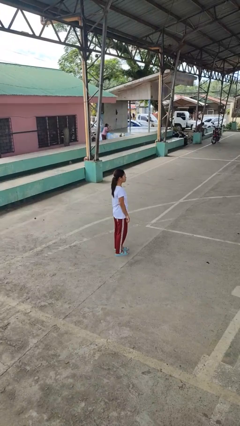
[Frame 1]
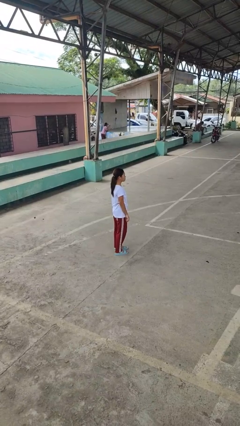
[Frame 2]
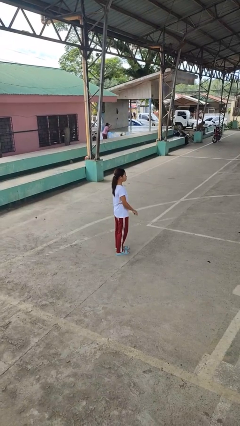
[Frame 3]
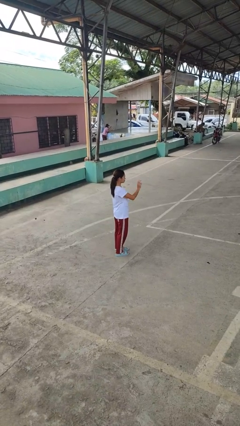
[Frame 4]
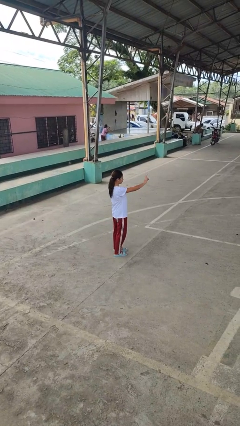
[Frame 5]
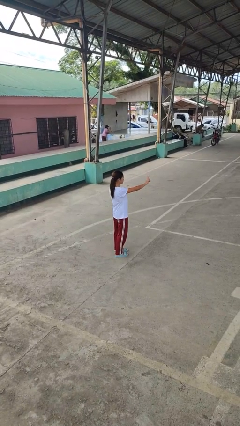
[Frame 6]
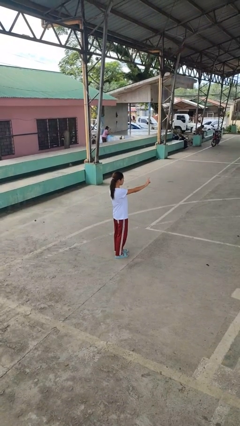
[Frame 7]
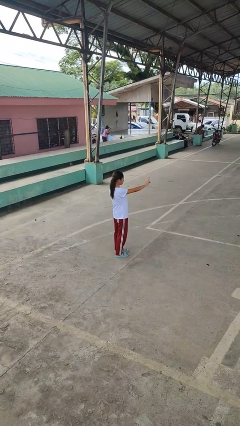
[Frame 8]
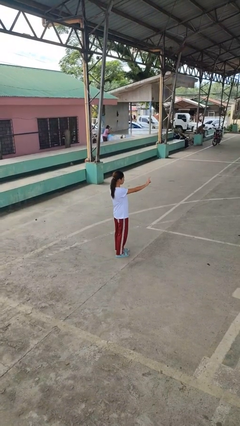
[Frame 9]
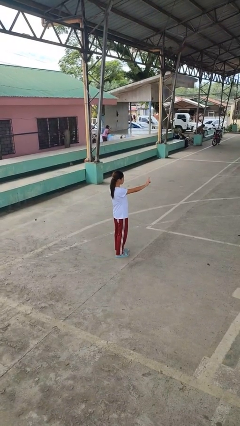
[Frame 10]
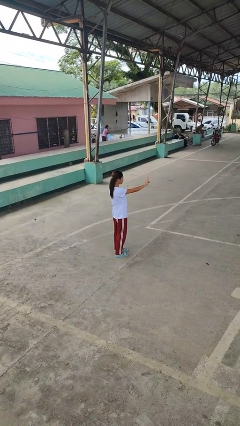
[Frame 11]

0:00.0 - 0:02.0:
person gestures peace

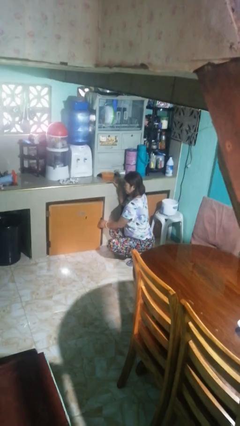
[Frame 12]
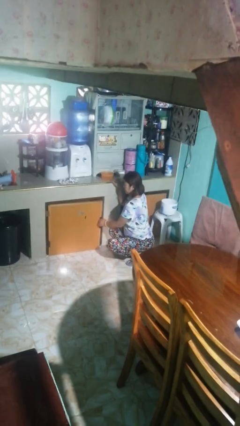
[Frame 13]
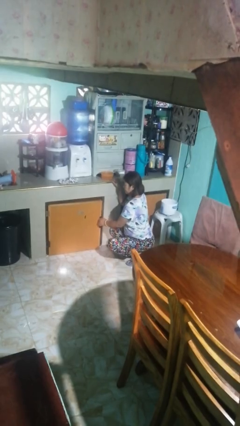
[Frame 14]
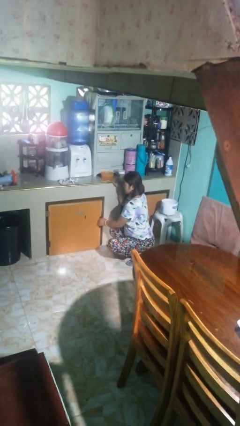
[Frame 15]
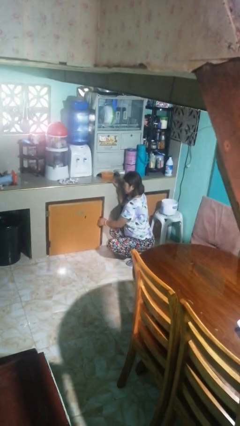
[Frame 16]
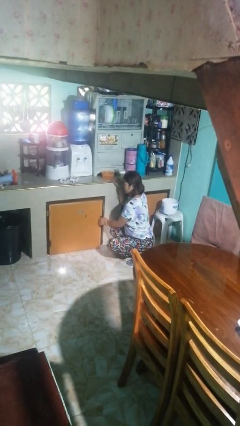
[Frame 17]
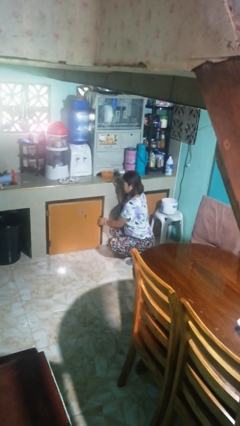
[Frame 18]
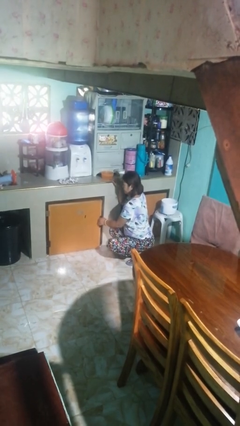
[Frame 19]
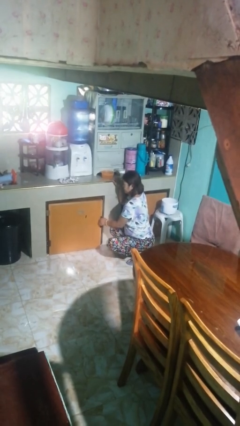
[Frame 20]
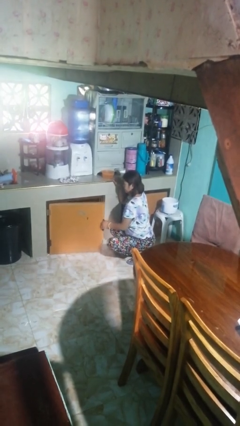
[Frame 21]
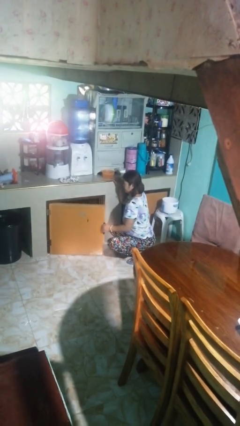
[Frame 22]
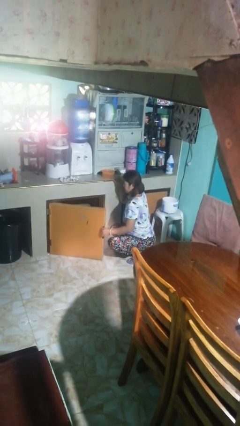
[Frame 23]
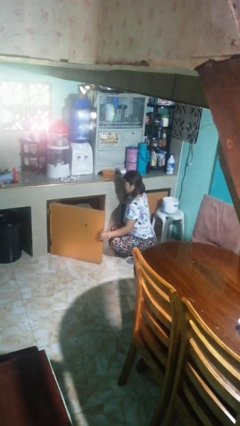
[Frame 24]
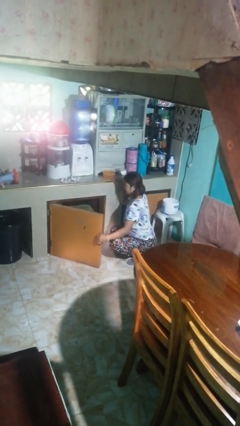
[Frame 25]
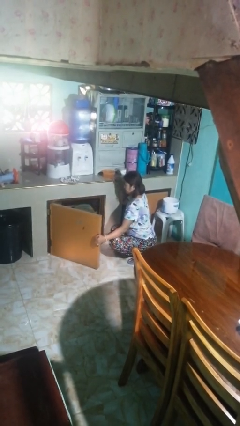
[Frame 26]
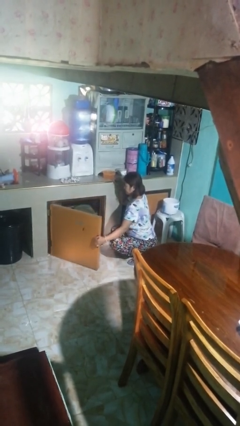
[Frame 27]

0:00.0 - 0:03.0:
person opens cabinet

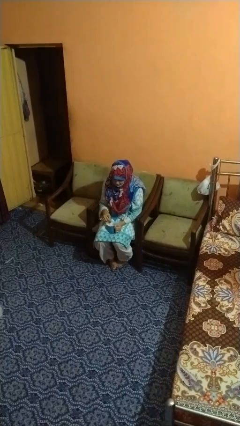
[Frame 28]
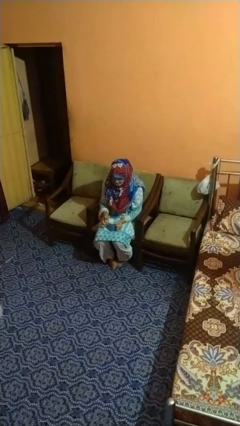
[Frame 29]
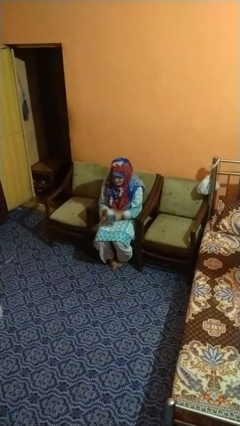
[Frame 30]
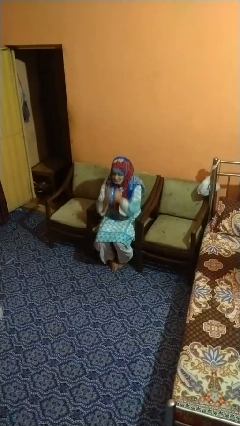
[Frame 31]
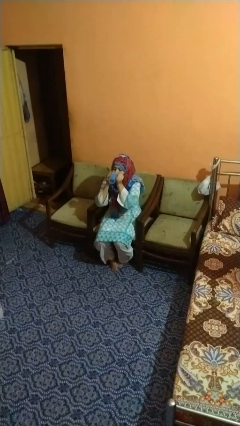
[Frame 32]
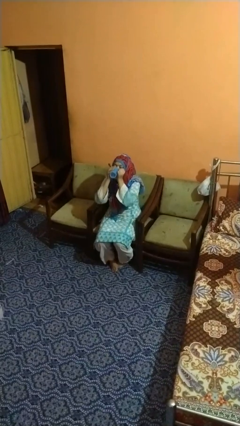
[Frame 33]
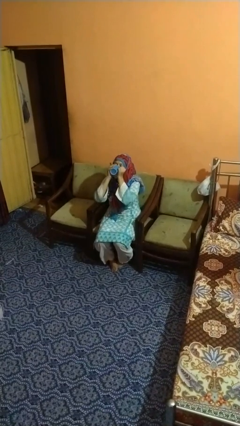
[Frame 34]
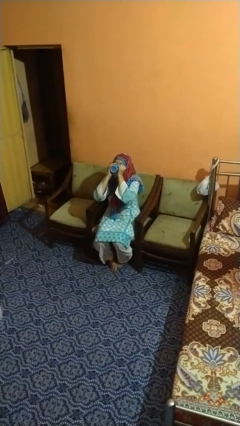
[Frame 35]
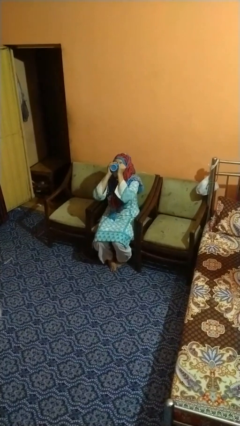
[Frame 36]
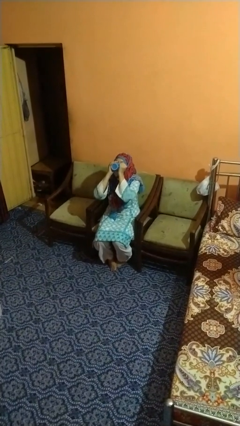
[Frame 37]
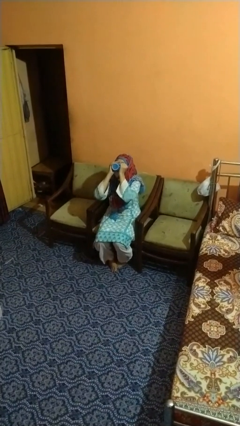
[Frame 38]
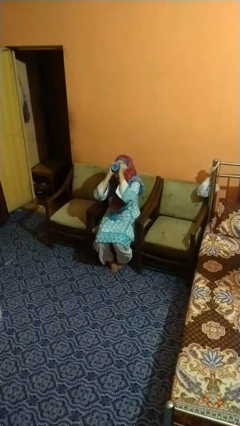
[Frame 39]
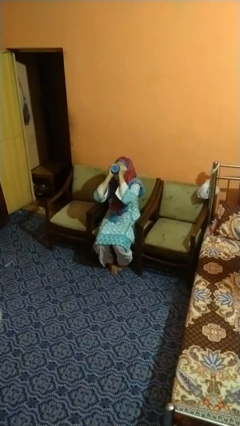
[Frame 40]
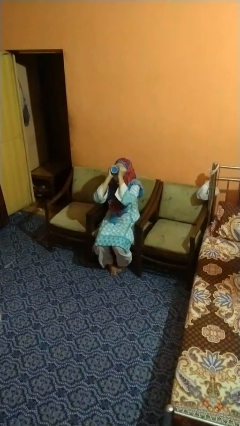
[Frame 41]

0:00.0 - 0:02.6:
person drinks from mug

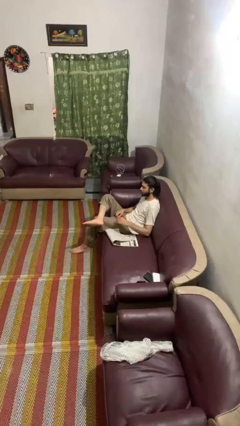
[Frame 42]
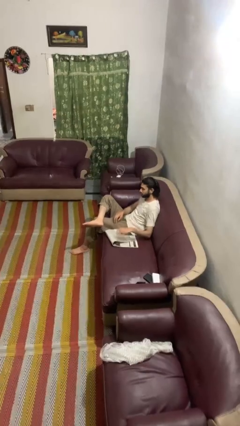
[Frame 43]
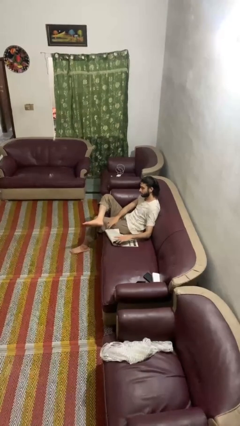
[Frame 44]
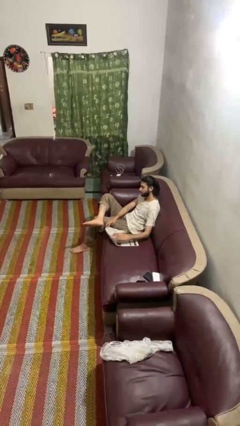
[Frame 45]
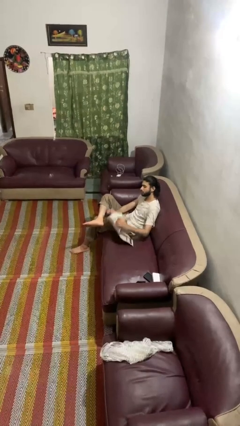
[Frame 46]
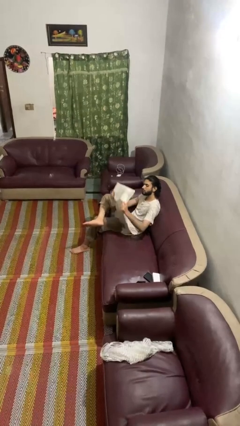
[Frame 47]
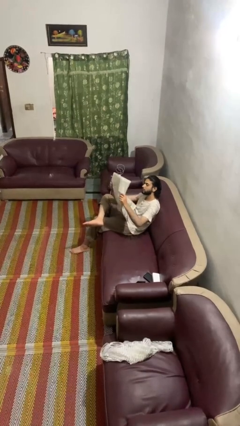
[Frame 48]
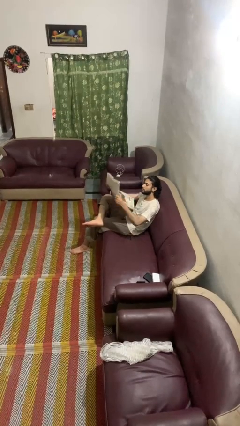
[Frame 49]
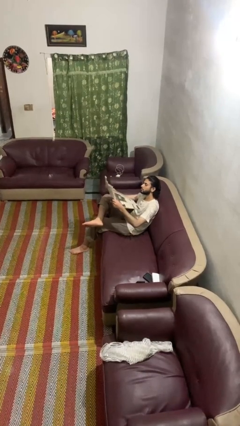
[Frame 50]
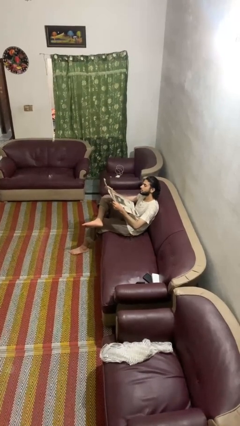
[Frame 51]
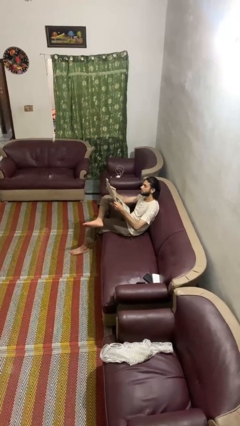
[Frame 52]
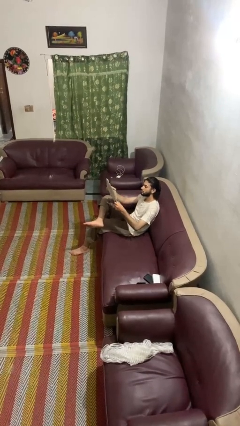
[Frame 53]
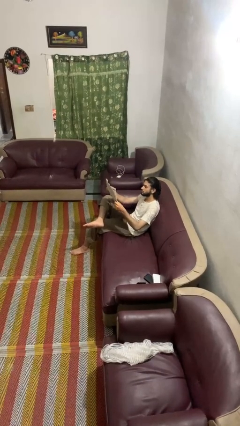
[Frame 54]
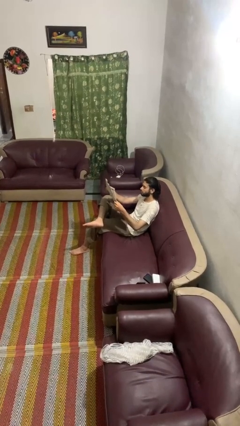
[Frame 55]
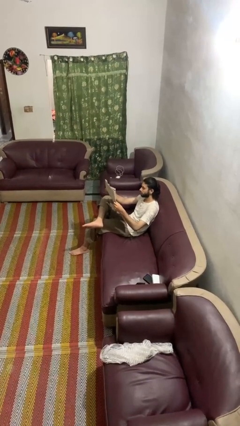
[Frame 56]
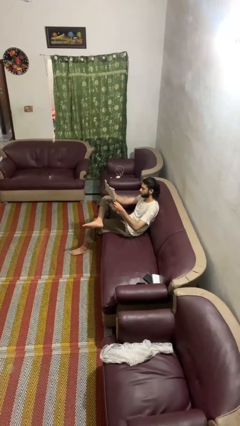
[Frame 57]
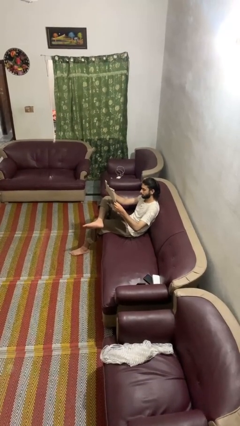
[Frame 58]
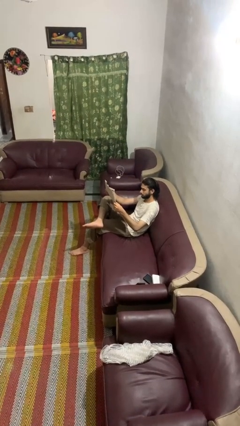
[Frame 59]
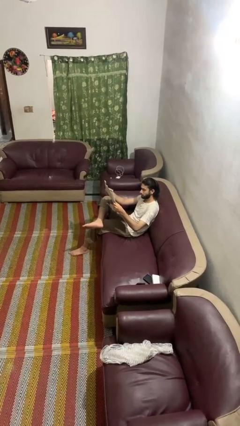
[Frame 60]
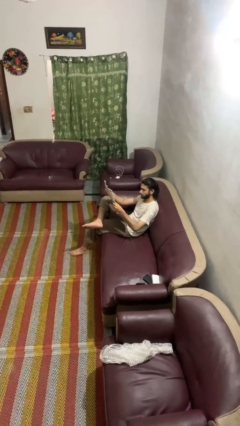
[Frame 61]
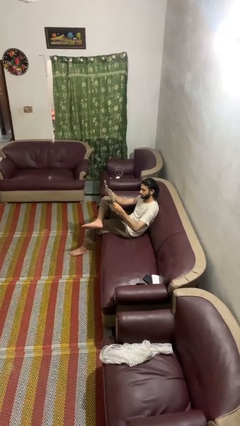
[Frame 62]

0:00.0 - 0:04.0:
person reads newspaper

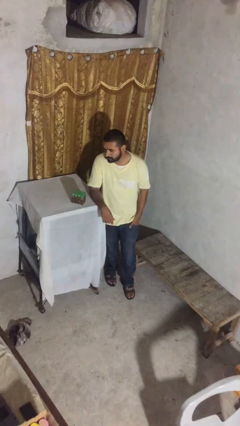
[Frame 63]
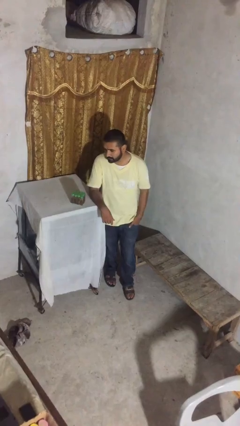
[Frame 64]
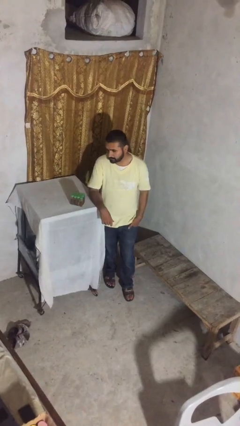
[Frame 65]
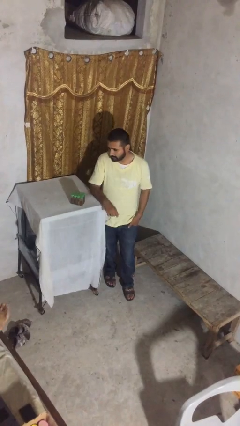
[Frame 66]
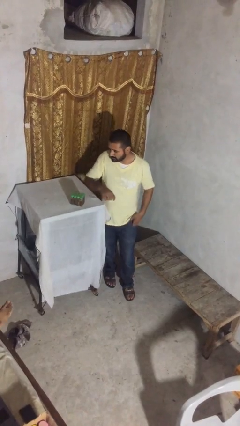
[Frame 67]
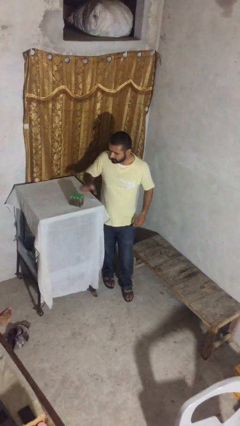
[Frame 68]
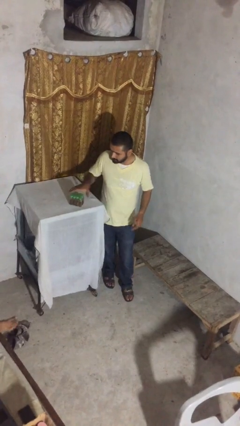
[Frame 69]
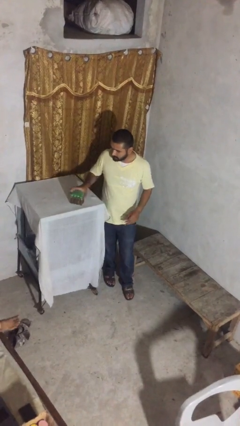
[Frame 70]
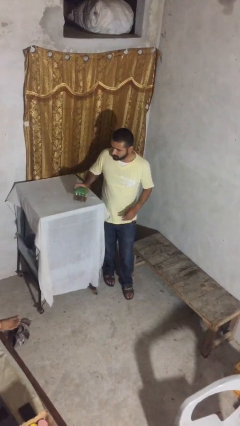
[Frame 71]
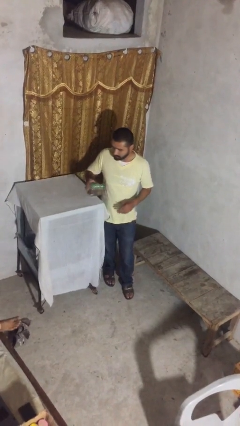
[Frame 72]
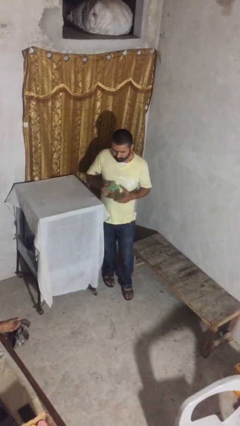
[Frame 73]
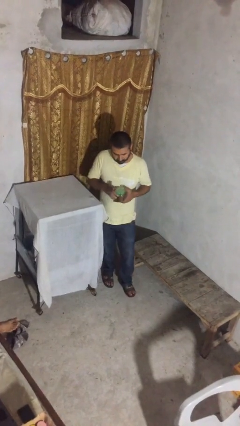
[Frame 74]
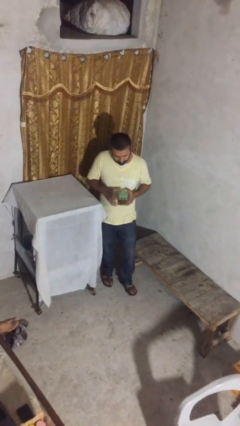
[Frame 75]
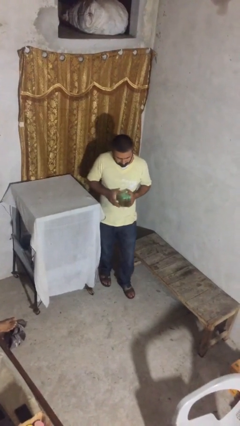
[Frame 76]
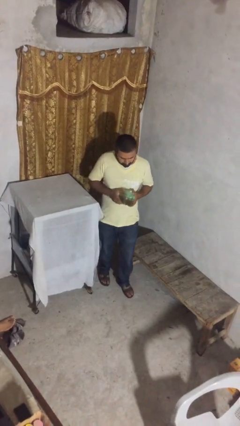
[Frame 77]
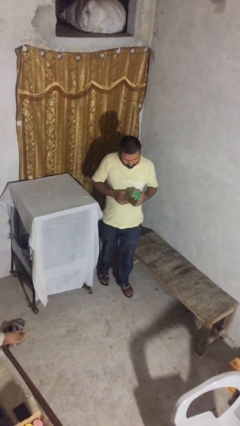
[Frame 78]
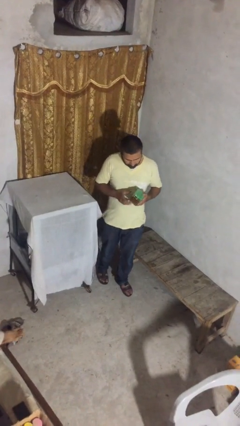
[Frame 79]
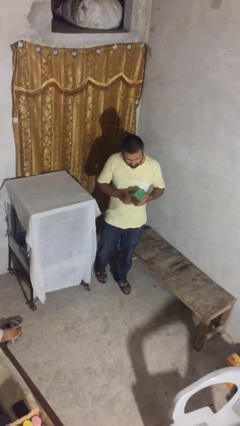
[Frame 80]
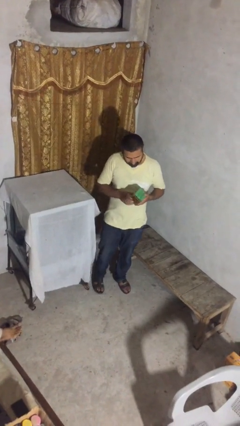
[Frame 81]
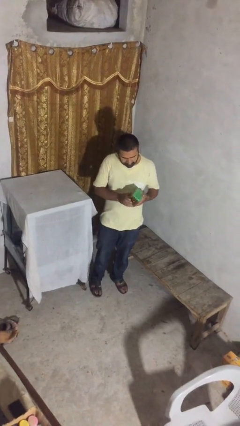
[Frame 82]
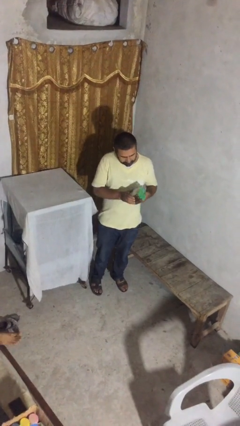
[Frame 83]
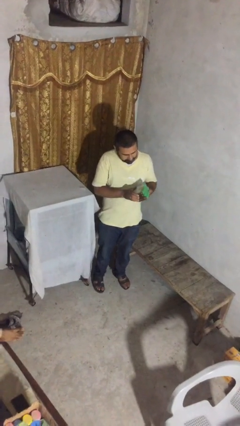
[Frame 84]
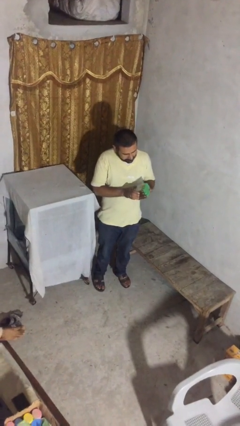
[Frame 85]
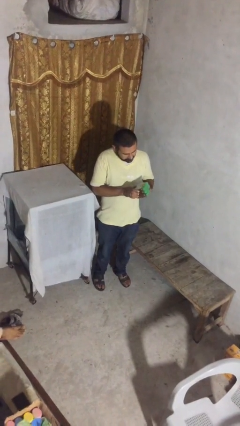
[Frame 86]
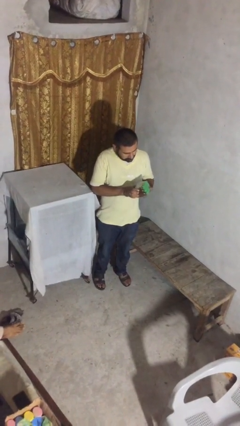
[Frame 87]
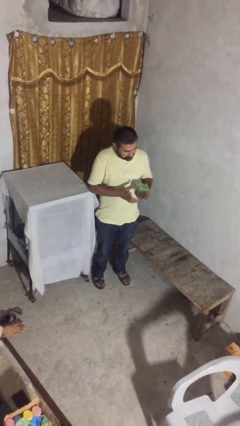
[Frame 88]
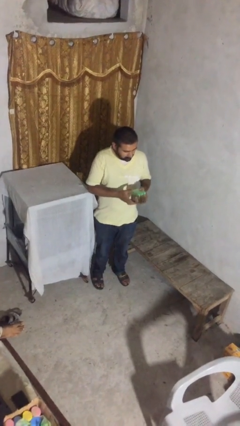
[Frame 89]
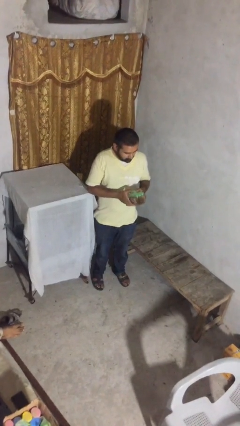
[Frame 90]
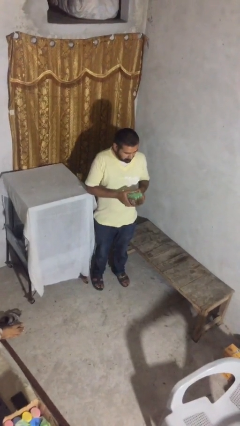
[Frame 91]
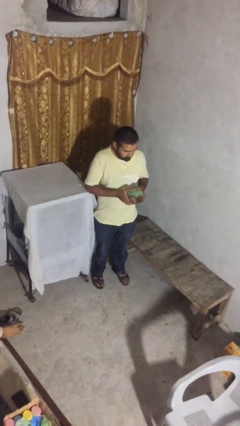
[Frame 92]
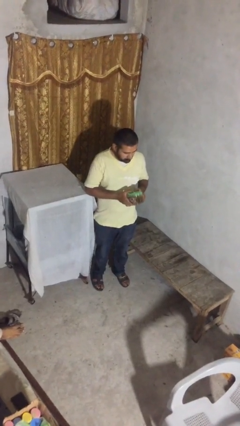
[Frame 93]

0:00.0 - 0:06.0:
person picks up object from shelf
